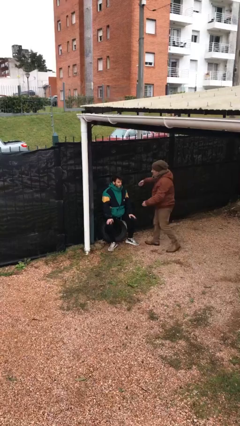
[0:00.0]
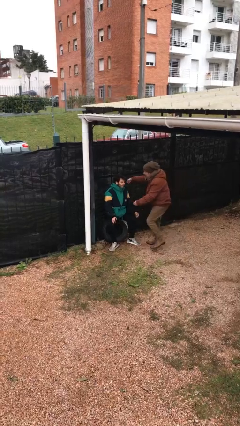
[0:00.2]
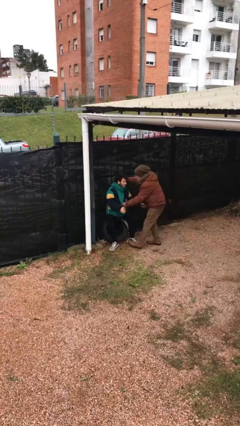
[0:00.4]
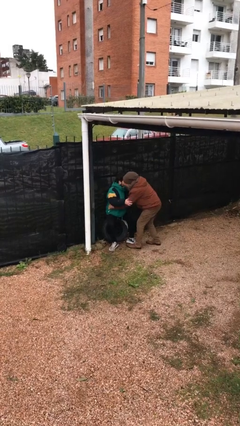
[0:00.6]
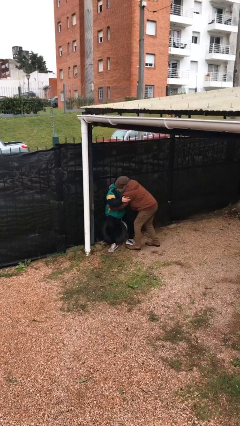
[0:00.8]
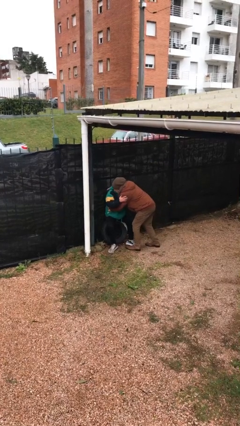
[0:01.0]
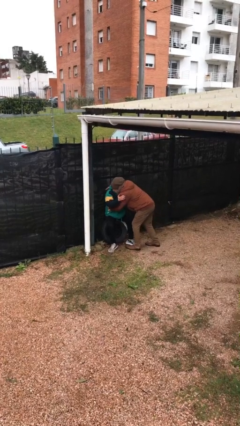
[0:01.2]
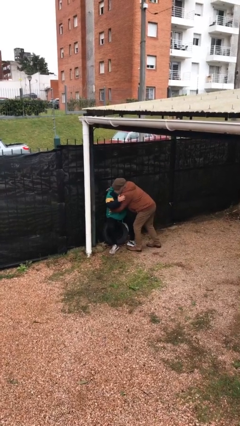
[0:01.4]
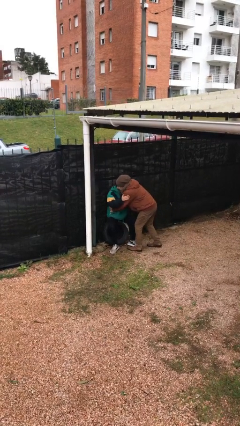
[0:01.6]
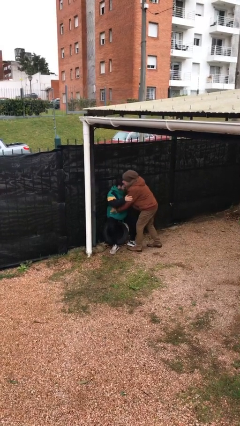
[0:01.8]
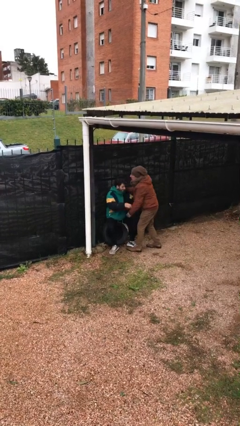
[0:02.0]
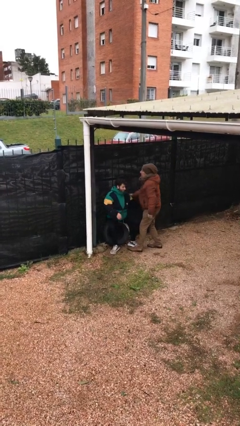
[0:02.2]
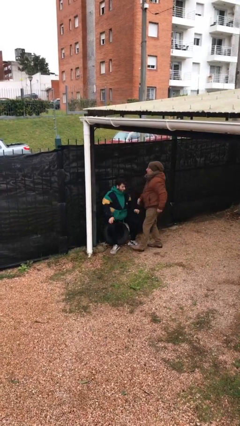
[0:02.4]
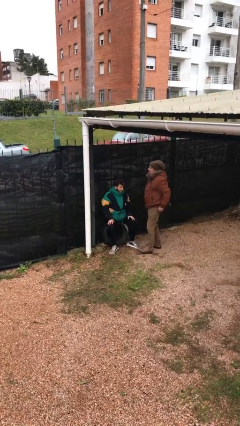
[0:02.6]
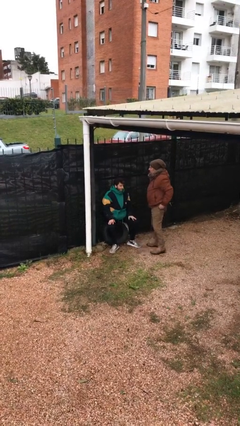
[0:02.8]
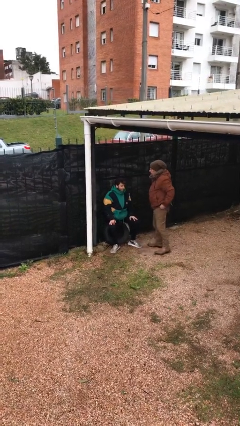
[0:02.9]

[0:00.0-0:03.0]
person embraces person

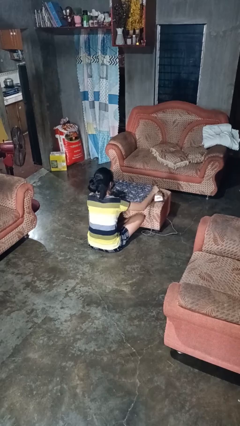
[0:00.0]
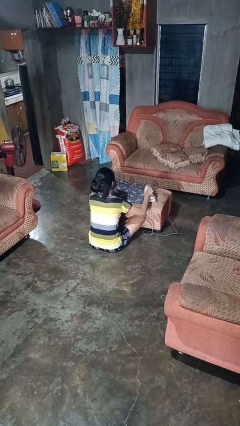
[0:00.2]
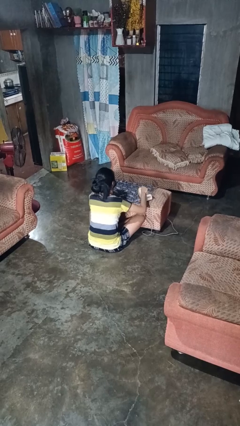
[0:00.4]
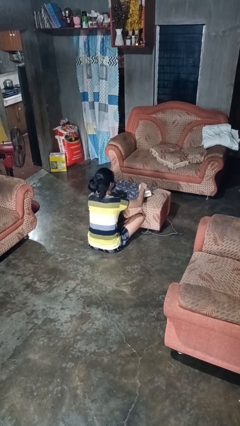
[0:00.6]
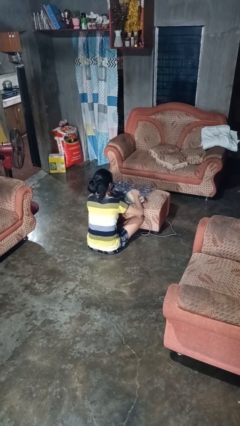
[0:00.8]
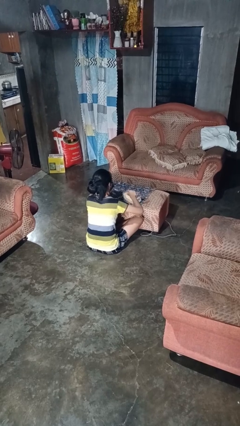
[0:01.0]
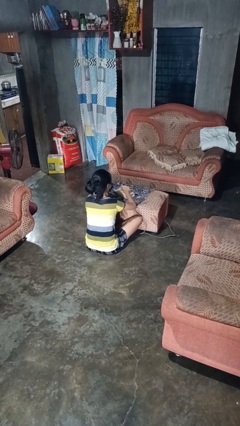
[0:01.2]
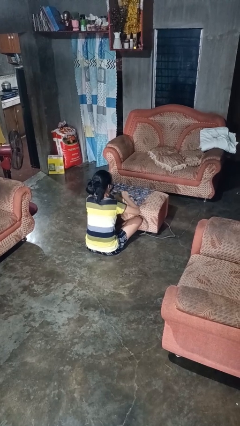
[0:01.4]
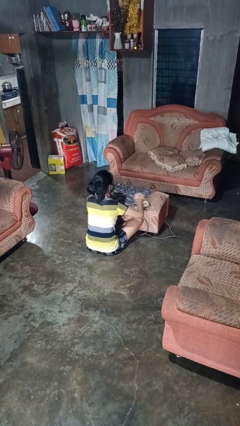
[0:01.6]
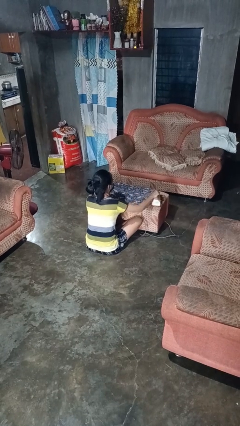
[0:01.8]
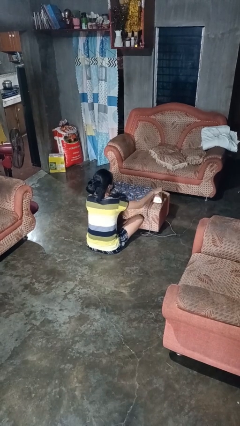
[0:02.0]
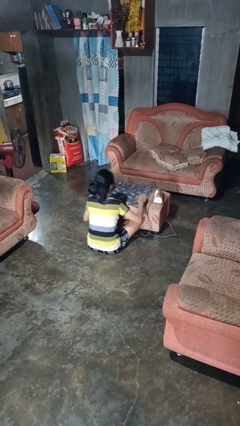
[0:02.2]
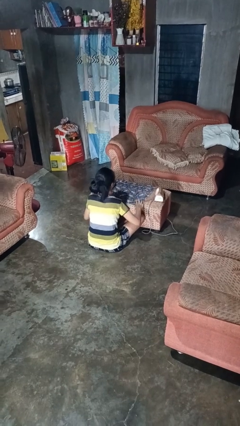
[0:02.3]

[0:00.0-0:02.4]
person irons clothes

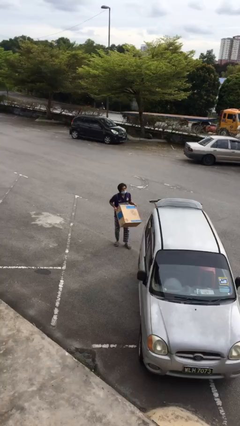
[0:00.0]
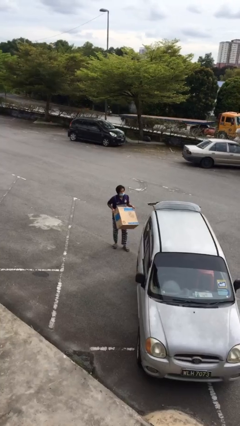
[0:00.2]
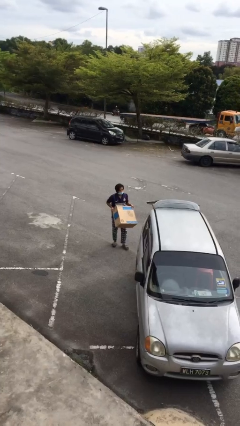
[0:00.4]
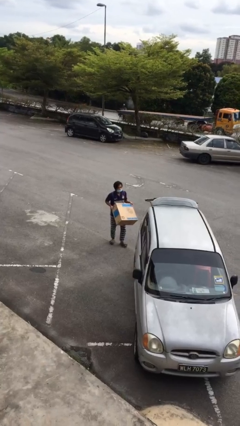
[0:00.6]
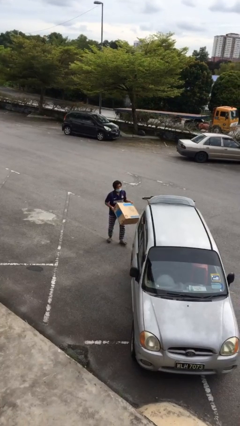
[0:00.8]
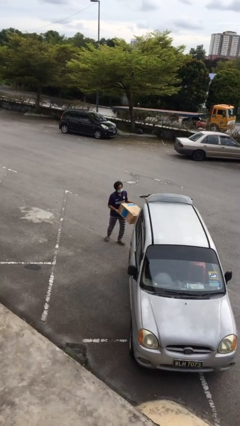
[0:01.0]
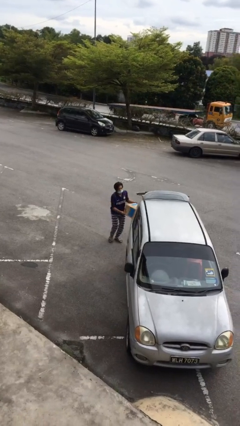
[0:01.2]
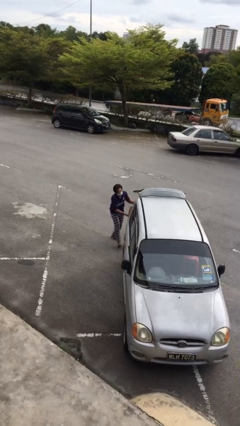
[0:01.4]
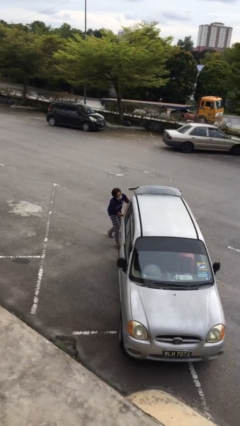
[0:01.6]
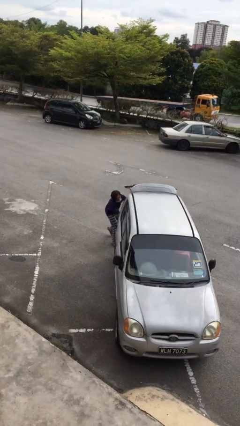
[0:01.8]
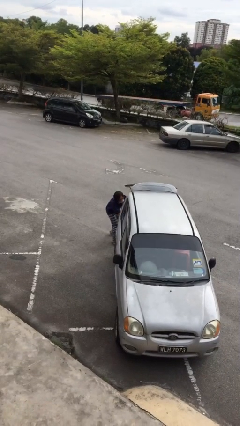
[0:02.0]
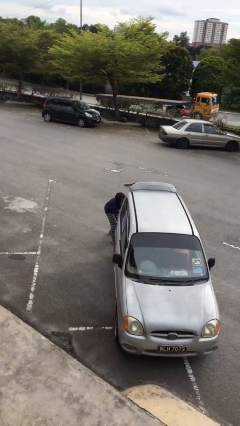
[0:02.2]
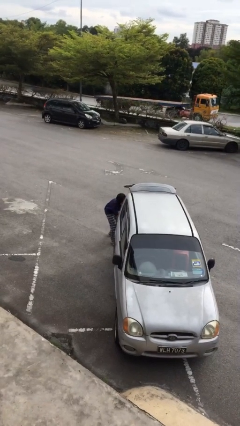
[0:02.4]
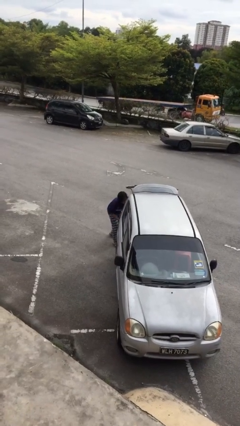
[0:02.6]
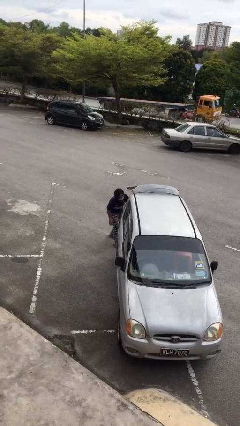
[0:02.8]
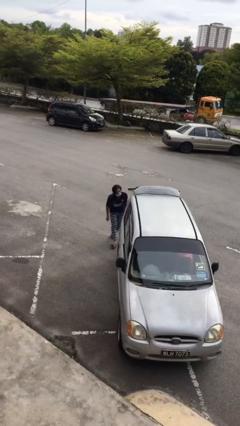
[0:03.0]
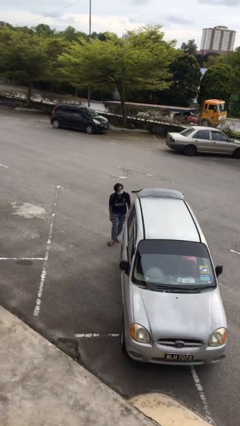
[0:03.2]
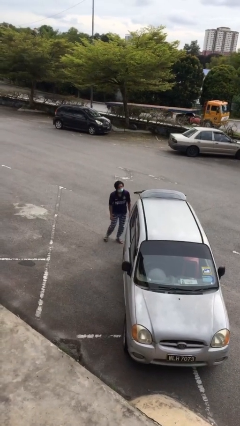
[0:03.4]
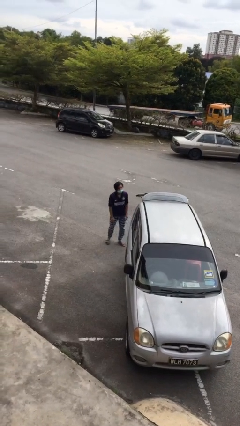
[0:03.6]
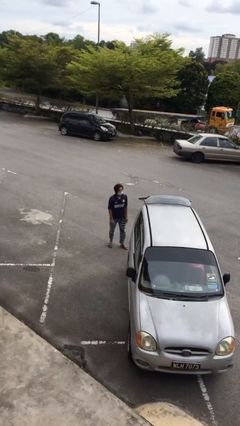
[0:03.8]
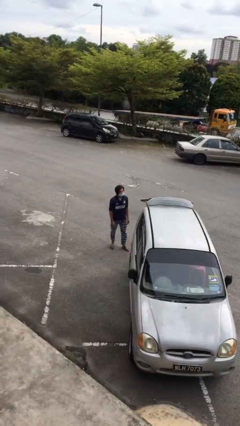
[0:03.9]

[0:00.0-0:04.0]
person loads car

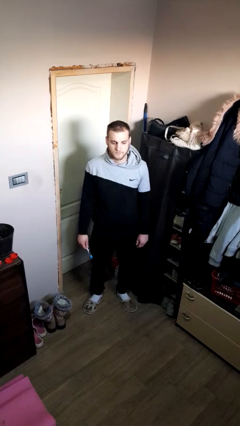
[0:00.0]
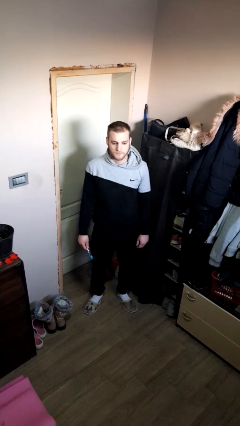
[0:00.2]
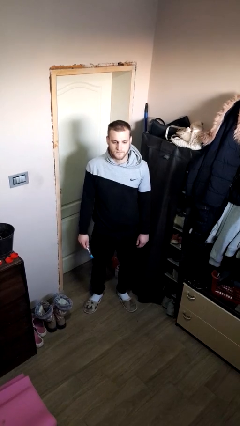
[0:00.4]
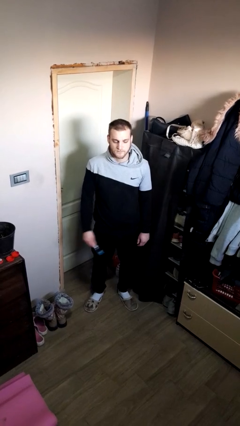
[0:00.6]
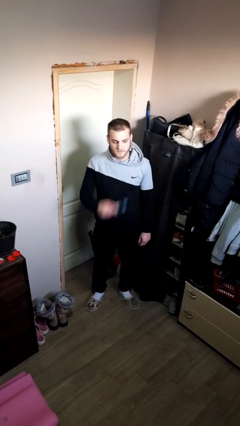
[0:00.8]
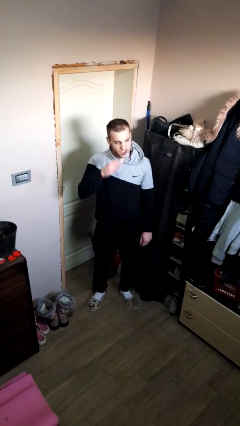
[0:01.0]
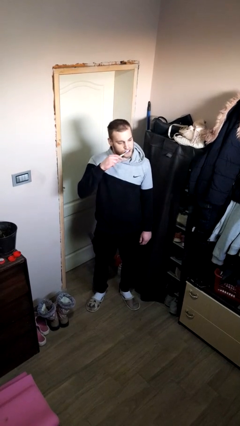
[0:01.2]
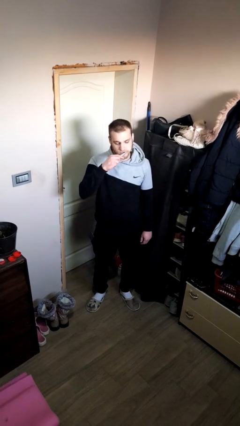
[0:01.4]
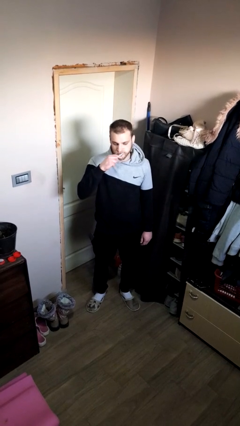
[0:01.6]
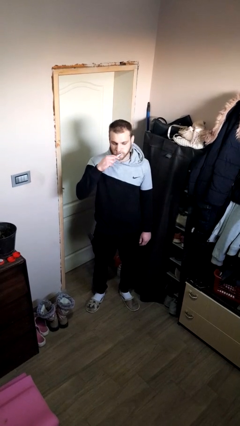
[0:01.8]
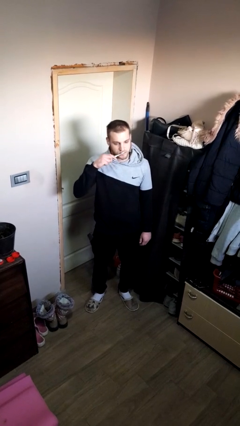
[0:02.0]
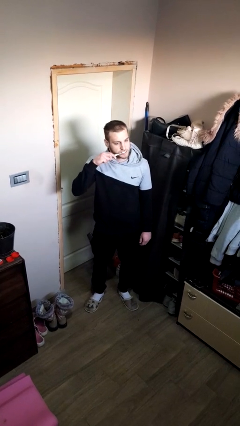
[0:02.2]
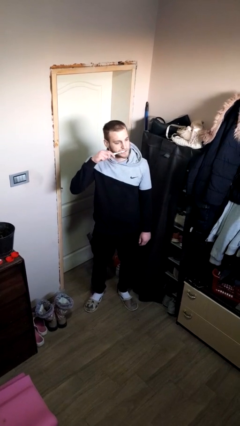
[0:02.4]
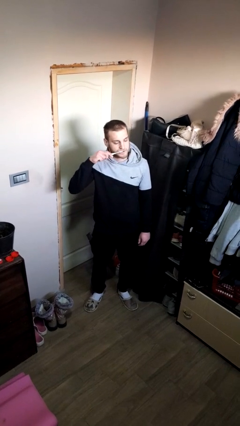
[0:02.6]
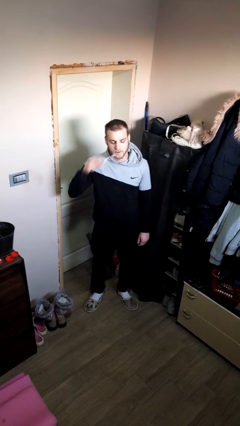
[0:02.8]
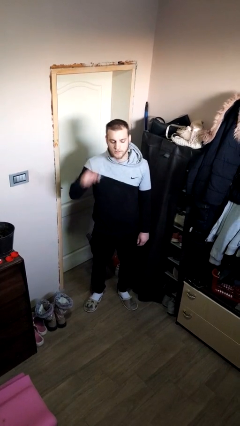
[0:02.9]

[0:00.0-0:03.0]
person brushes teeth

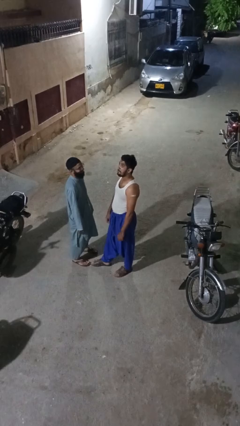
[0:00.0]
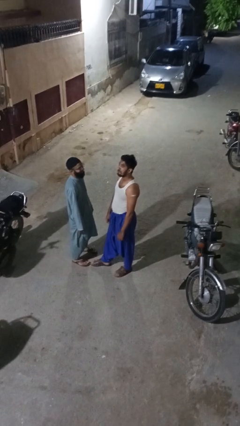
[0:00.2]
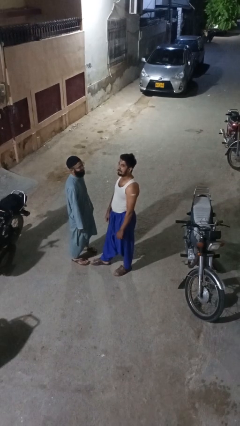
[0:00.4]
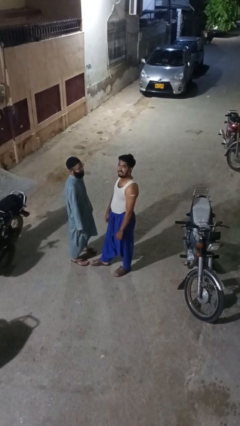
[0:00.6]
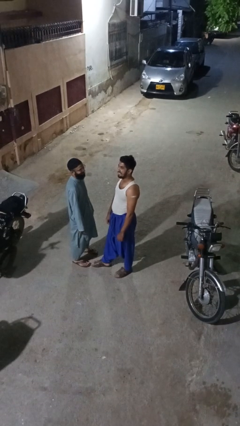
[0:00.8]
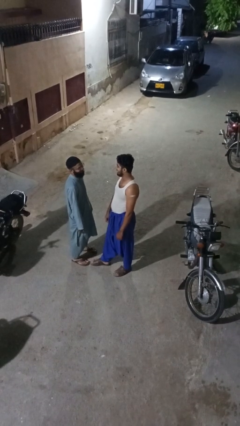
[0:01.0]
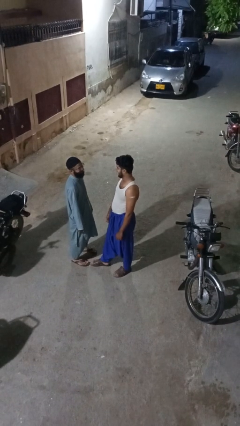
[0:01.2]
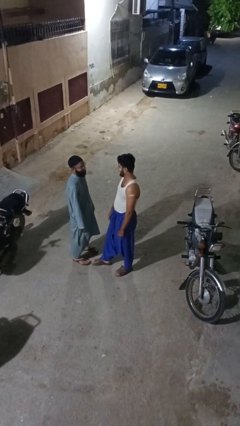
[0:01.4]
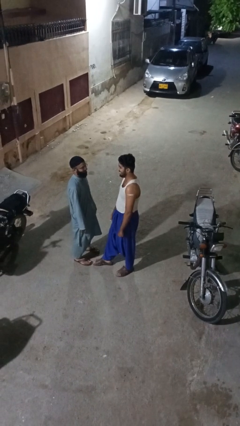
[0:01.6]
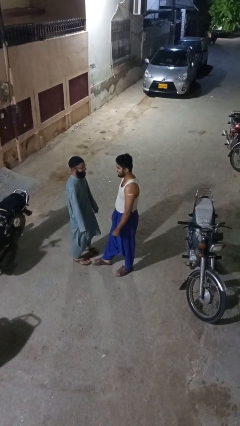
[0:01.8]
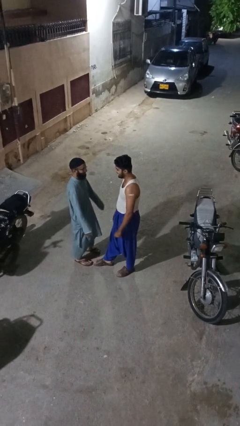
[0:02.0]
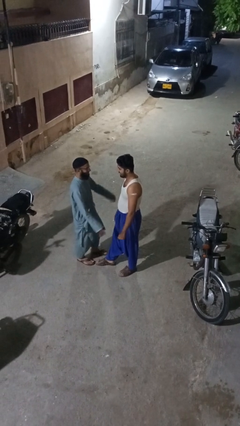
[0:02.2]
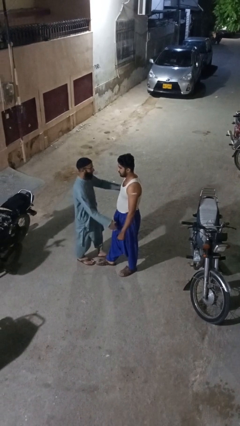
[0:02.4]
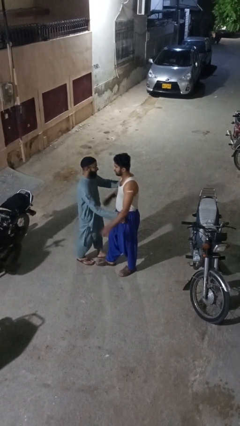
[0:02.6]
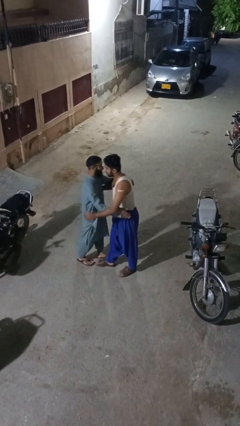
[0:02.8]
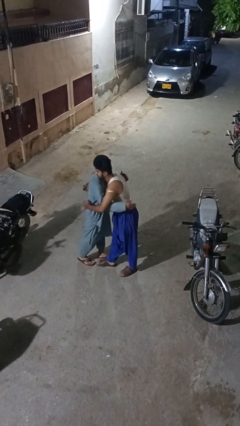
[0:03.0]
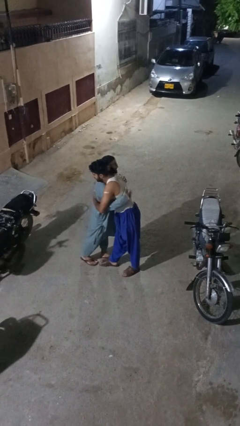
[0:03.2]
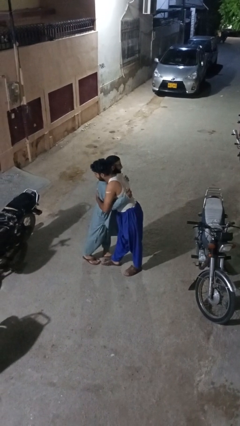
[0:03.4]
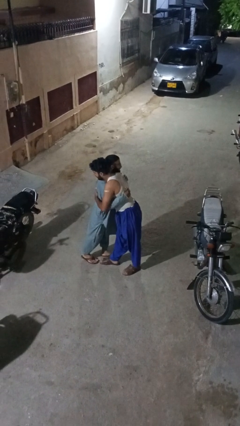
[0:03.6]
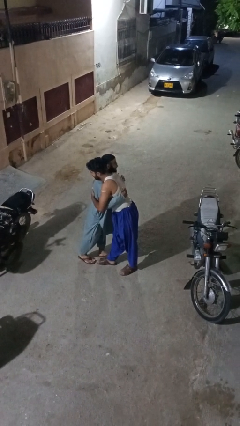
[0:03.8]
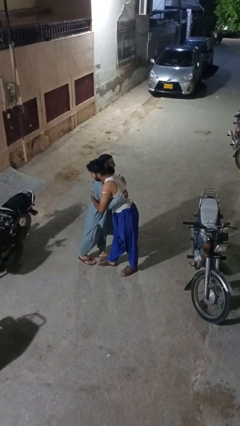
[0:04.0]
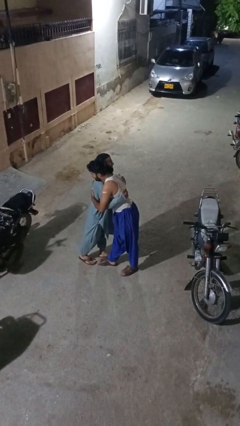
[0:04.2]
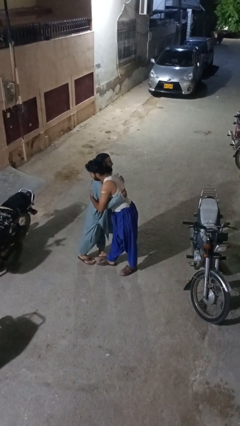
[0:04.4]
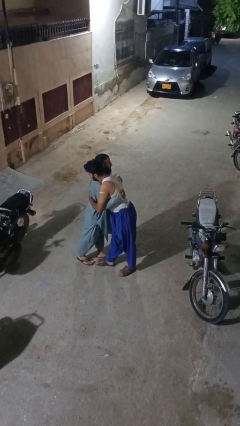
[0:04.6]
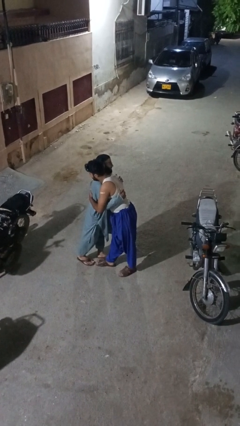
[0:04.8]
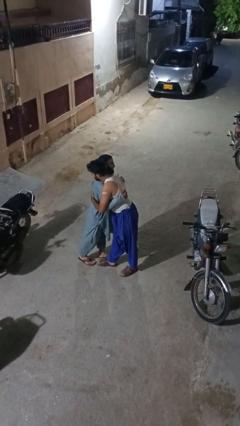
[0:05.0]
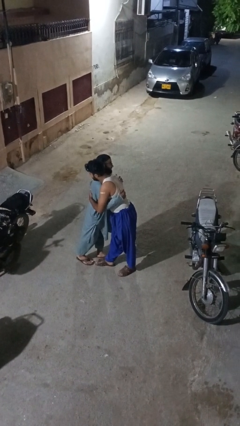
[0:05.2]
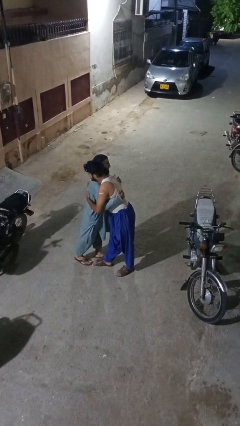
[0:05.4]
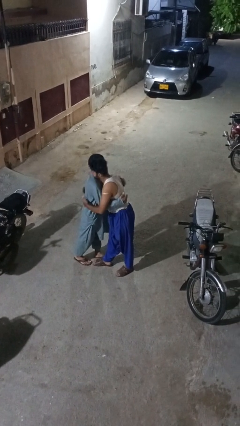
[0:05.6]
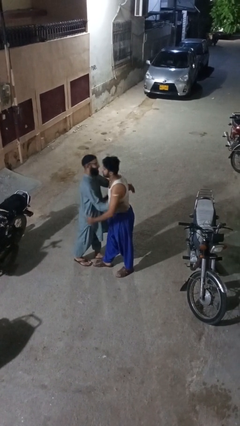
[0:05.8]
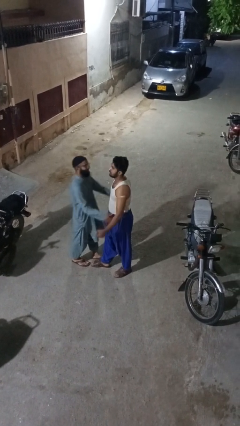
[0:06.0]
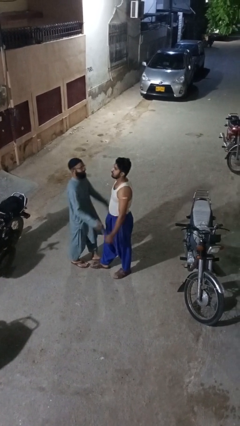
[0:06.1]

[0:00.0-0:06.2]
person kisses cheek of person
